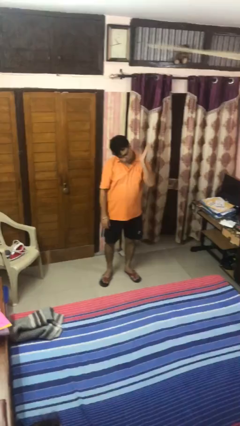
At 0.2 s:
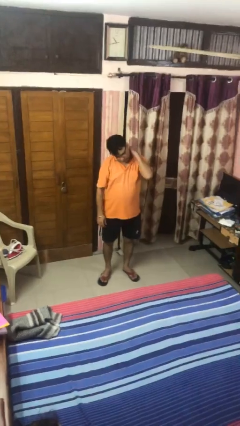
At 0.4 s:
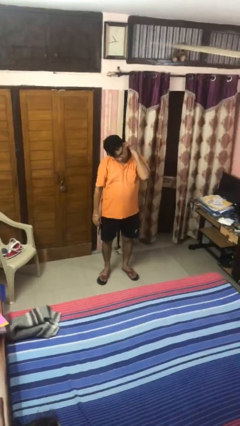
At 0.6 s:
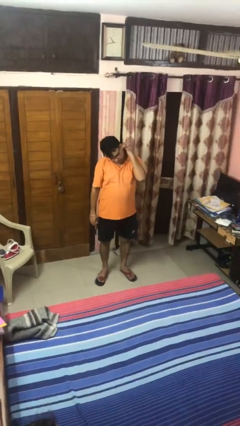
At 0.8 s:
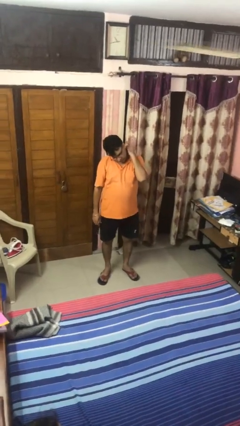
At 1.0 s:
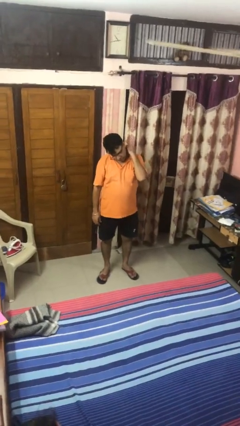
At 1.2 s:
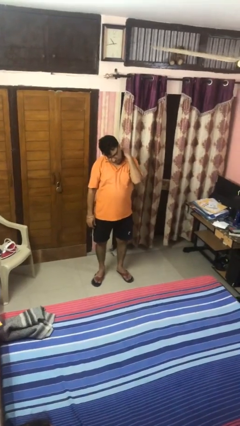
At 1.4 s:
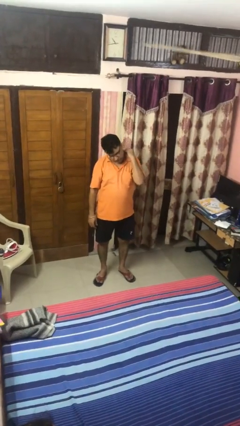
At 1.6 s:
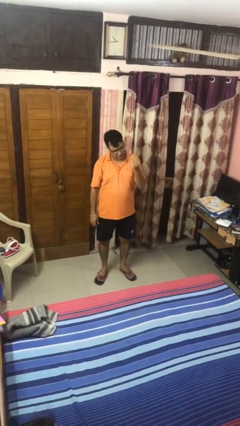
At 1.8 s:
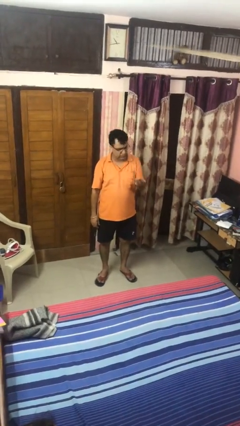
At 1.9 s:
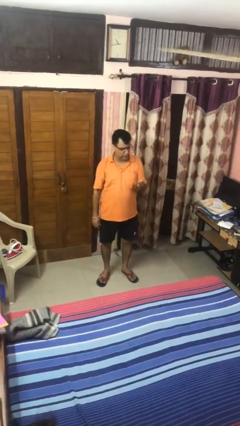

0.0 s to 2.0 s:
person swats bug

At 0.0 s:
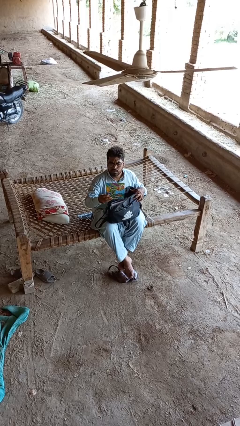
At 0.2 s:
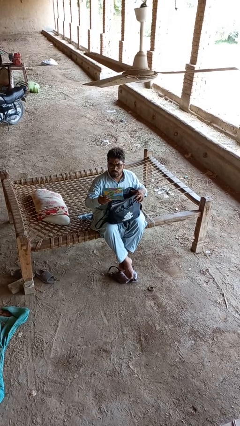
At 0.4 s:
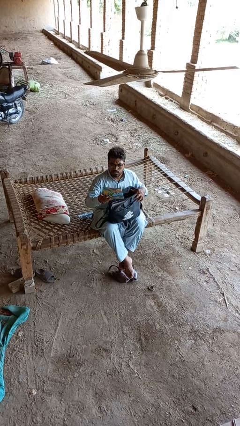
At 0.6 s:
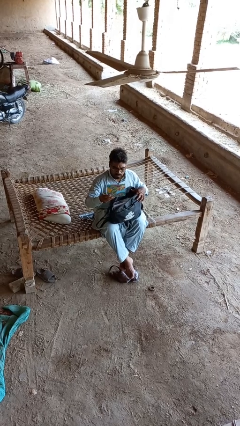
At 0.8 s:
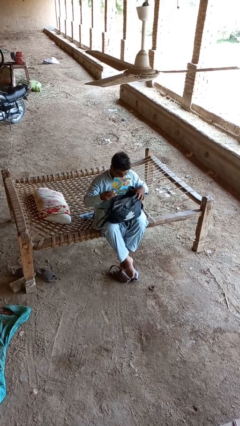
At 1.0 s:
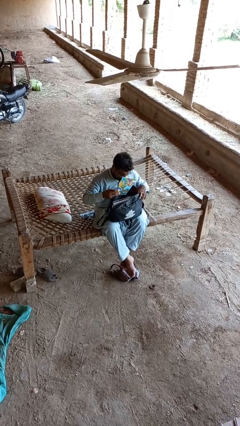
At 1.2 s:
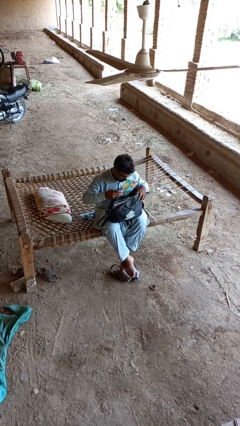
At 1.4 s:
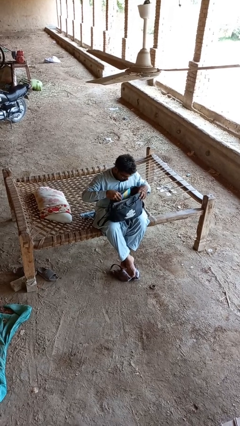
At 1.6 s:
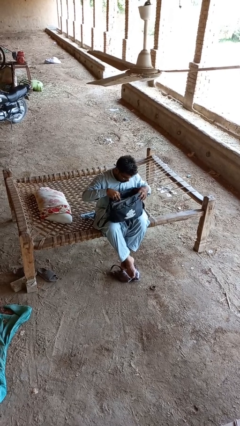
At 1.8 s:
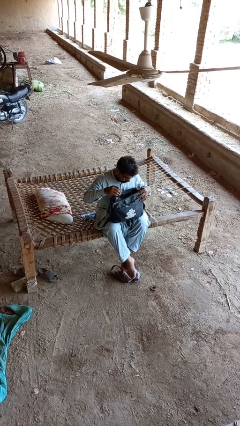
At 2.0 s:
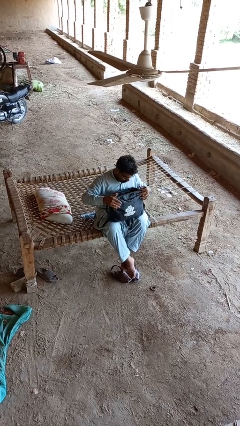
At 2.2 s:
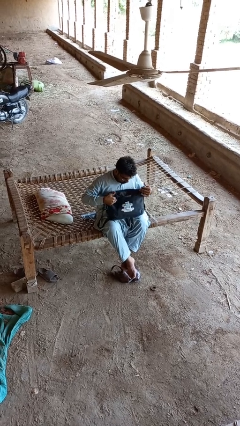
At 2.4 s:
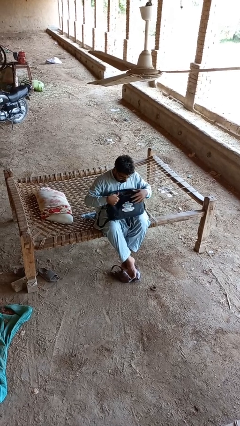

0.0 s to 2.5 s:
person puts object into backpack

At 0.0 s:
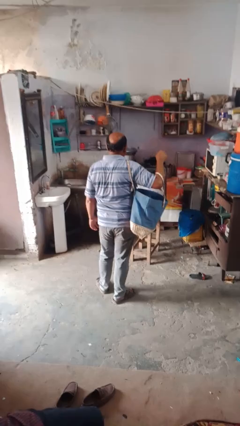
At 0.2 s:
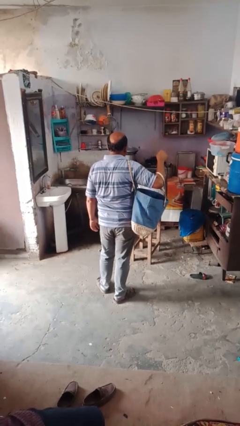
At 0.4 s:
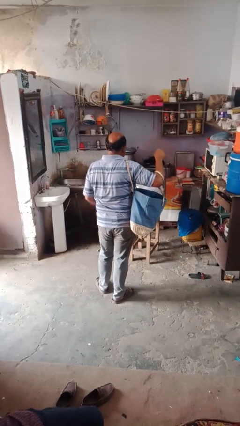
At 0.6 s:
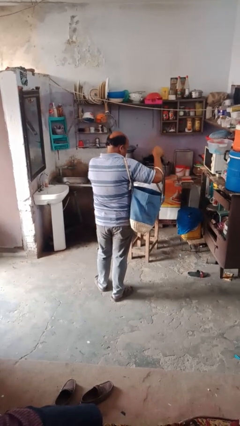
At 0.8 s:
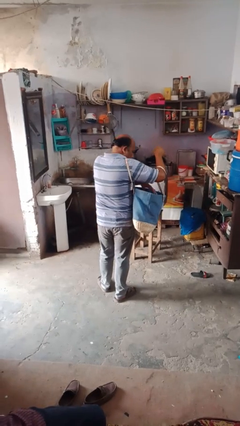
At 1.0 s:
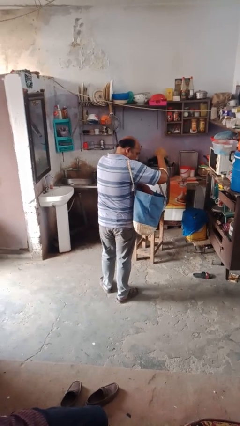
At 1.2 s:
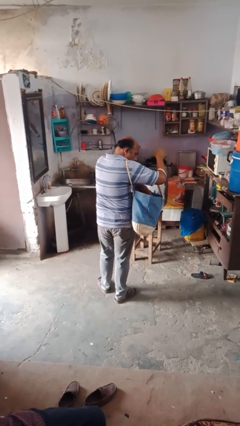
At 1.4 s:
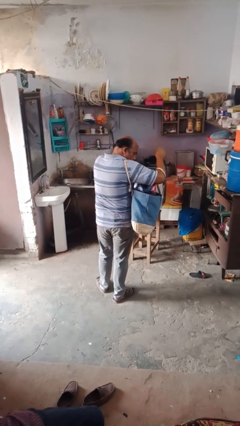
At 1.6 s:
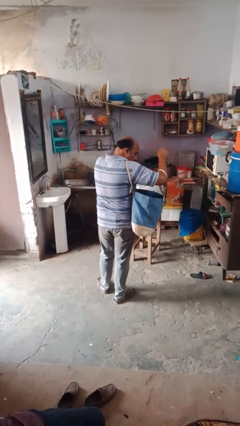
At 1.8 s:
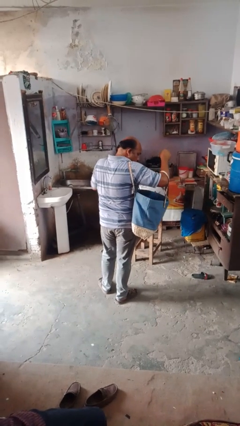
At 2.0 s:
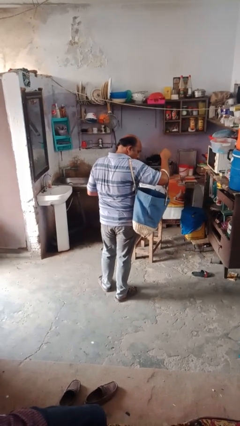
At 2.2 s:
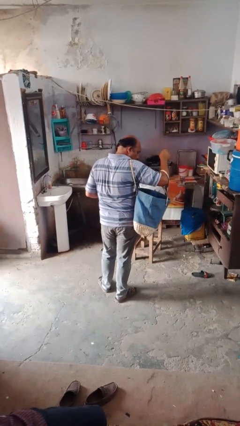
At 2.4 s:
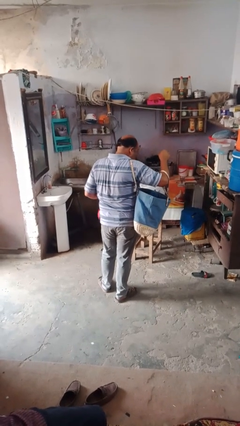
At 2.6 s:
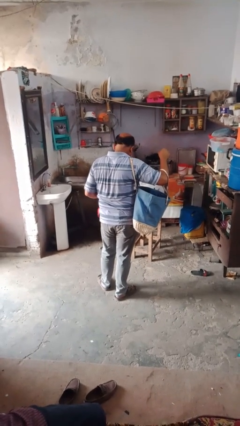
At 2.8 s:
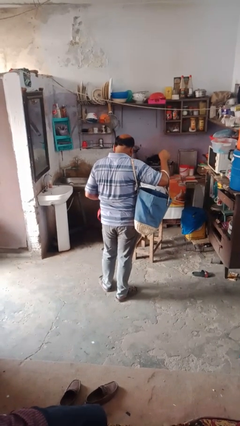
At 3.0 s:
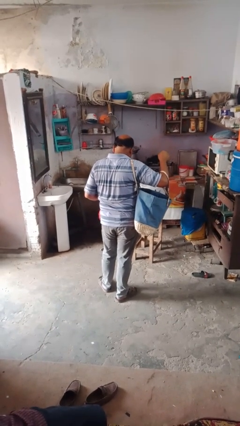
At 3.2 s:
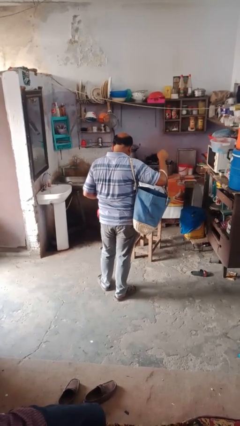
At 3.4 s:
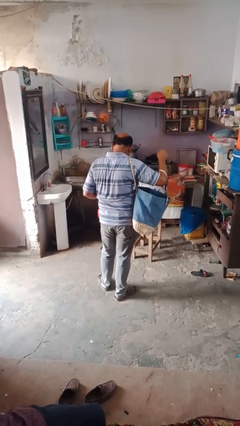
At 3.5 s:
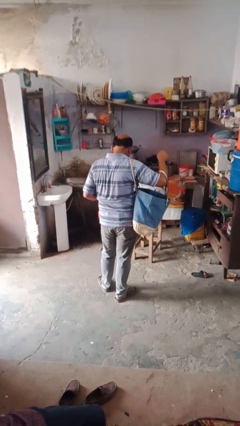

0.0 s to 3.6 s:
person takes object from bag

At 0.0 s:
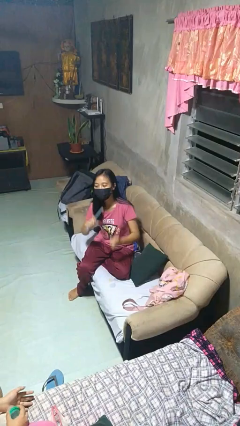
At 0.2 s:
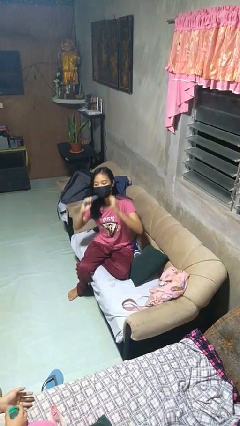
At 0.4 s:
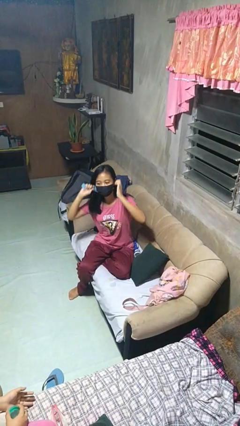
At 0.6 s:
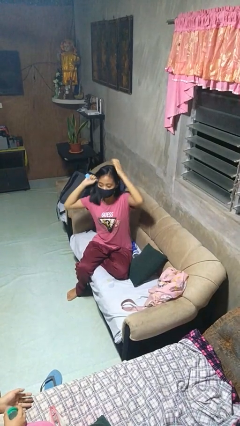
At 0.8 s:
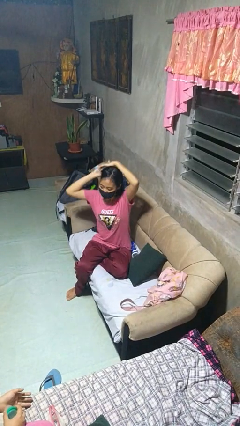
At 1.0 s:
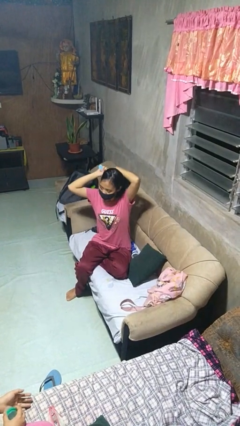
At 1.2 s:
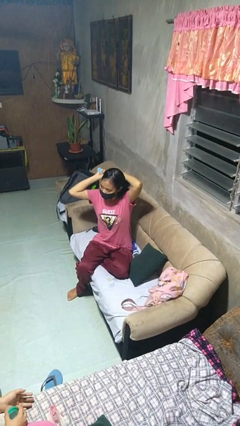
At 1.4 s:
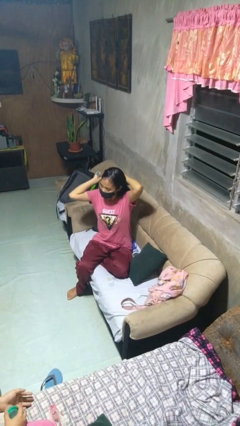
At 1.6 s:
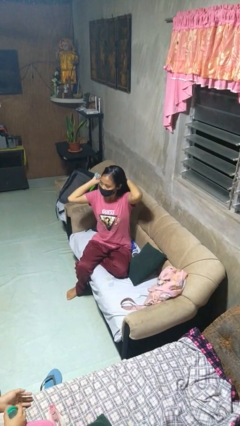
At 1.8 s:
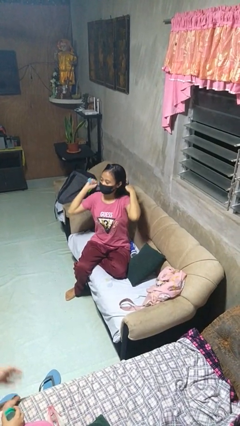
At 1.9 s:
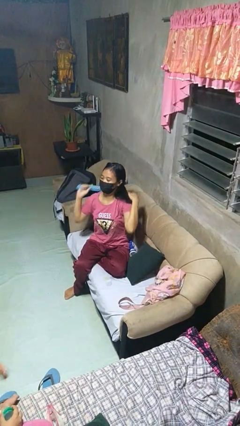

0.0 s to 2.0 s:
person brushes hair

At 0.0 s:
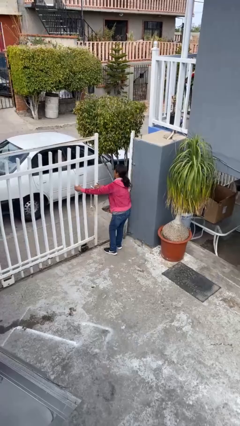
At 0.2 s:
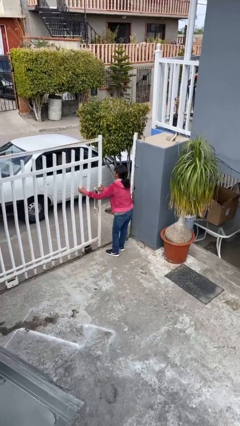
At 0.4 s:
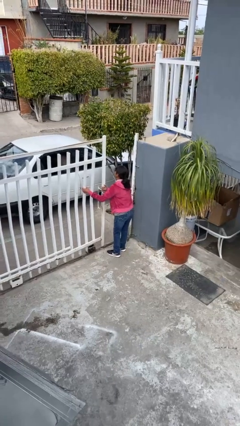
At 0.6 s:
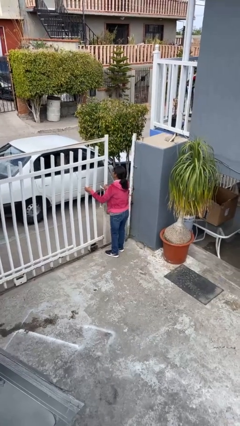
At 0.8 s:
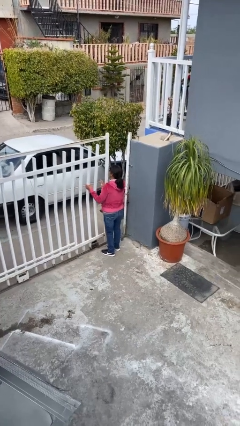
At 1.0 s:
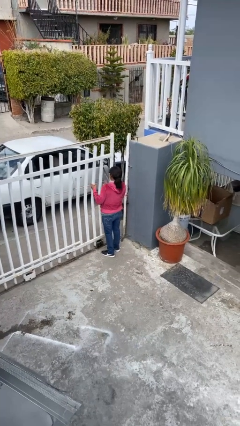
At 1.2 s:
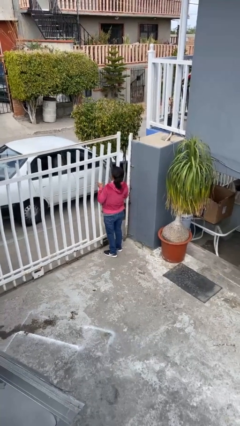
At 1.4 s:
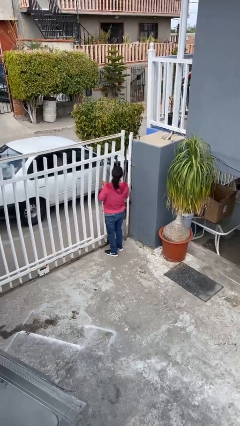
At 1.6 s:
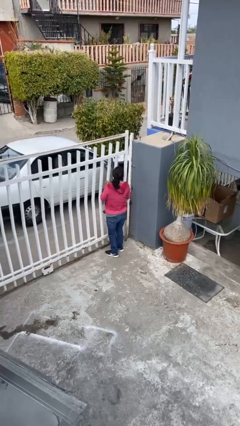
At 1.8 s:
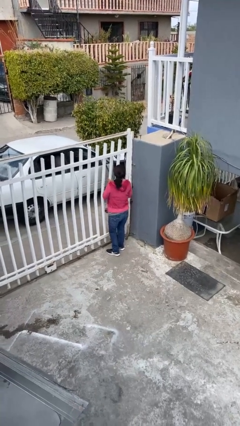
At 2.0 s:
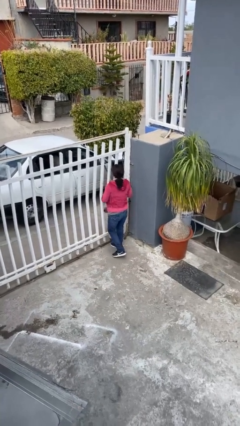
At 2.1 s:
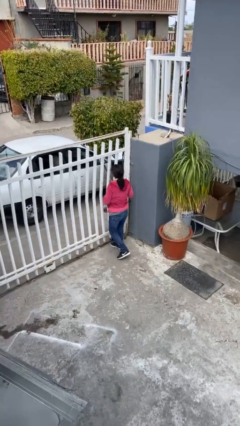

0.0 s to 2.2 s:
person closes facility door

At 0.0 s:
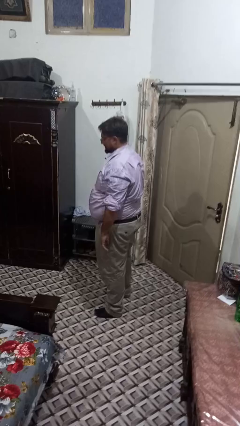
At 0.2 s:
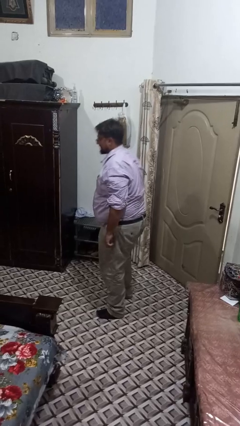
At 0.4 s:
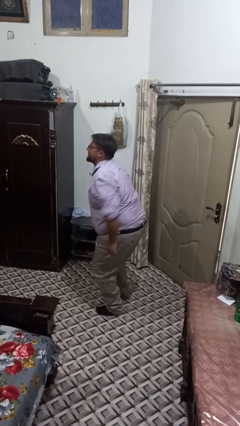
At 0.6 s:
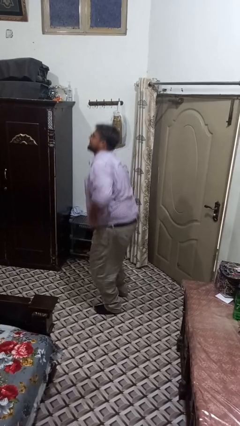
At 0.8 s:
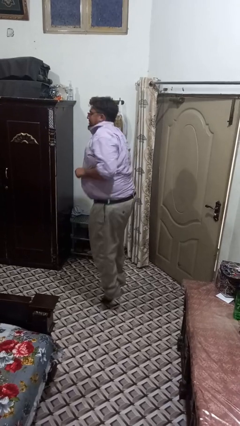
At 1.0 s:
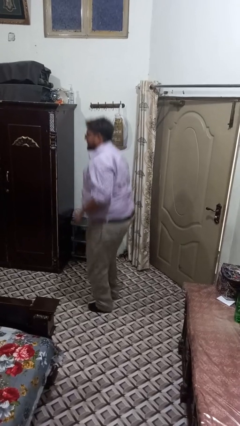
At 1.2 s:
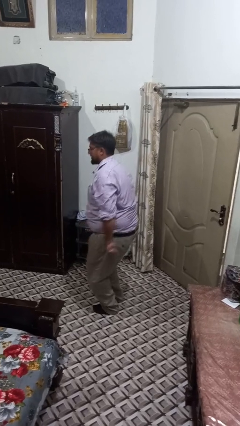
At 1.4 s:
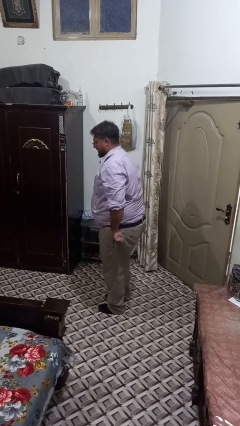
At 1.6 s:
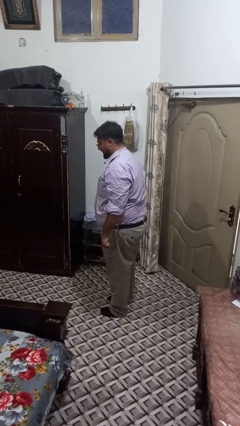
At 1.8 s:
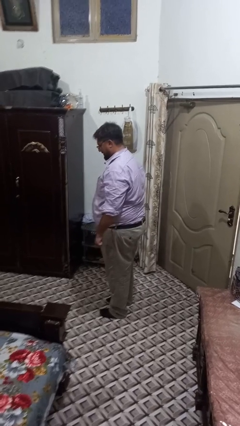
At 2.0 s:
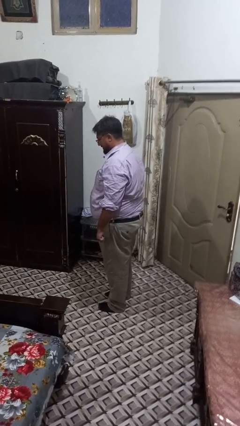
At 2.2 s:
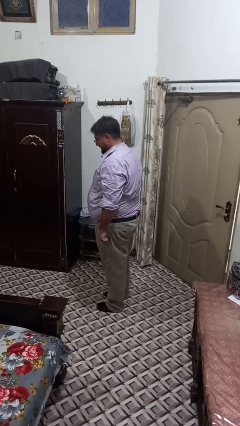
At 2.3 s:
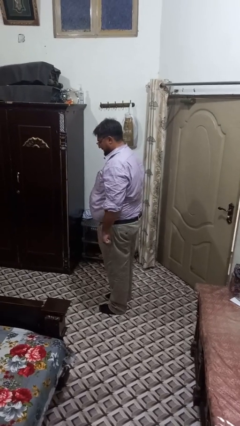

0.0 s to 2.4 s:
person jumps

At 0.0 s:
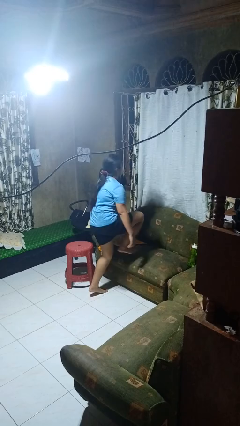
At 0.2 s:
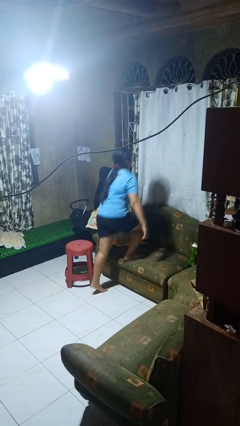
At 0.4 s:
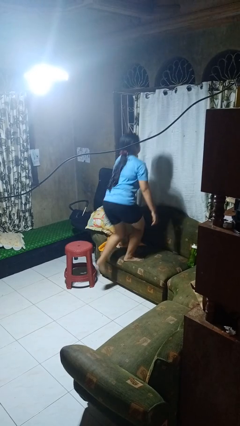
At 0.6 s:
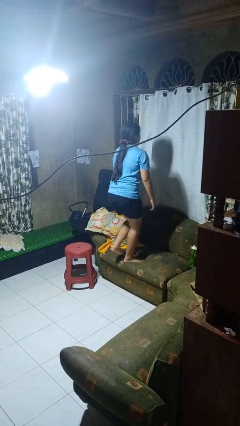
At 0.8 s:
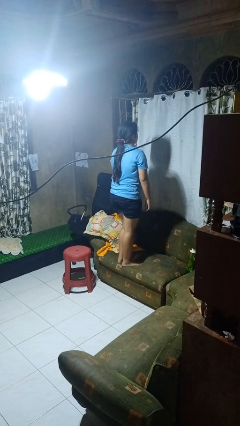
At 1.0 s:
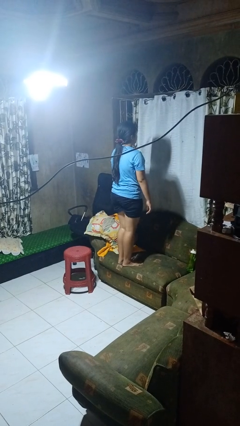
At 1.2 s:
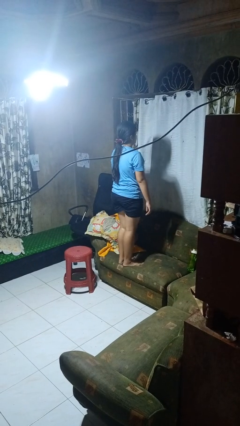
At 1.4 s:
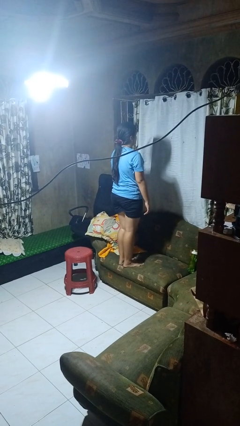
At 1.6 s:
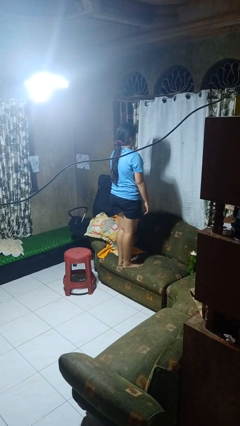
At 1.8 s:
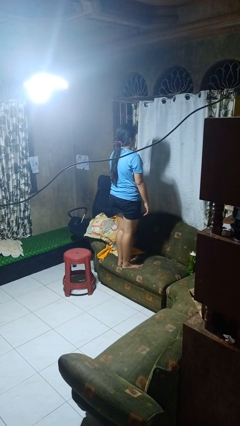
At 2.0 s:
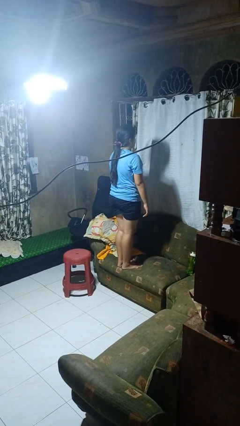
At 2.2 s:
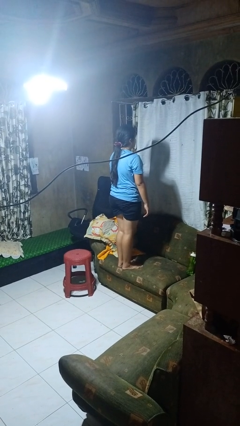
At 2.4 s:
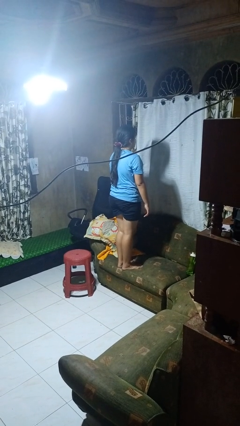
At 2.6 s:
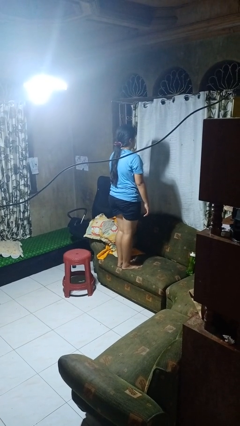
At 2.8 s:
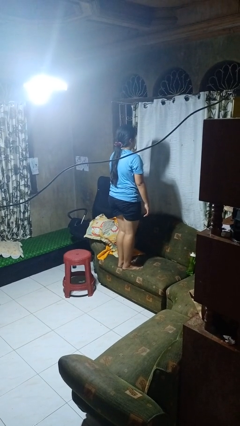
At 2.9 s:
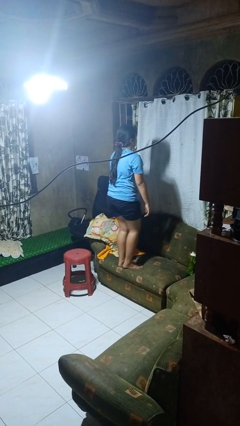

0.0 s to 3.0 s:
person climbs on couch
